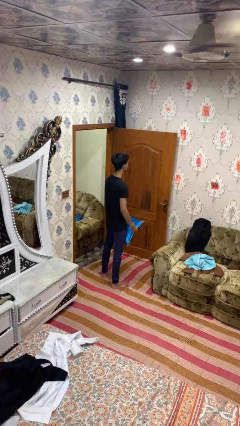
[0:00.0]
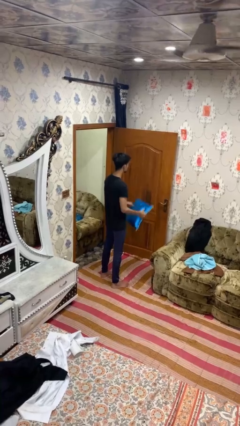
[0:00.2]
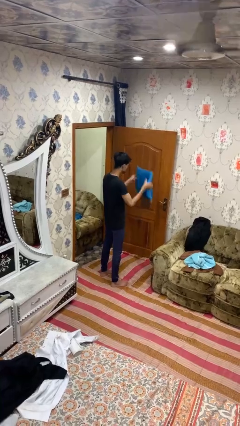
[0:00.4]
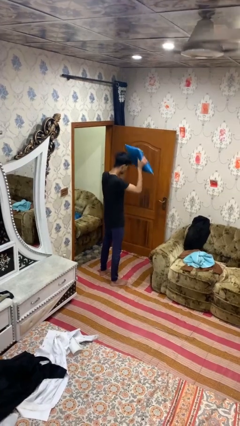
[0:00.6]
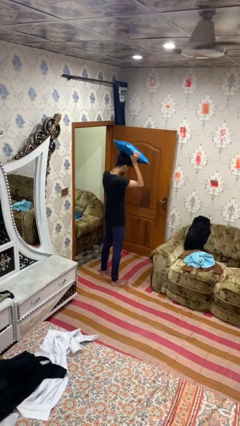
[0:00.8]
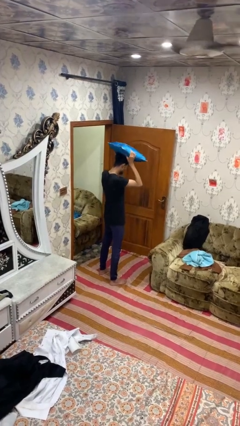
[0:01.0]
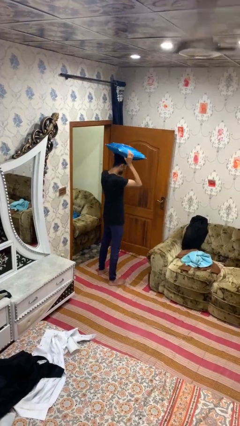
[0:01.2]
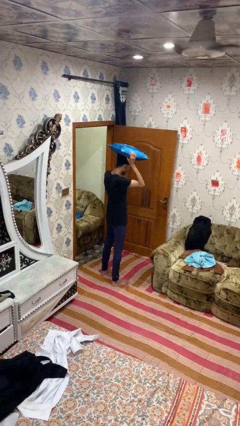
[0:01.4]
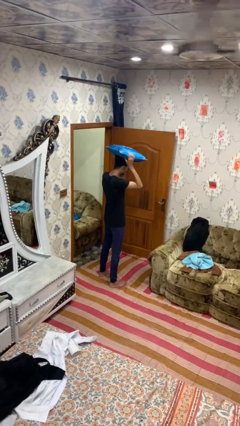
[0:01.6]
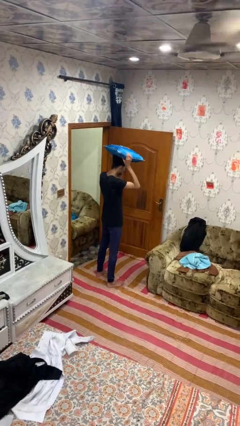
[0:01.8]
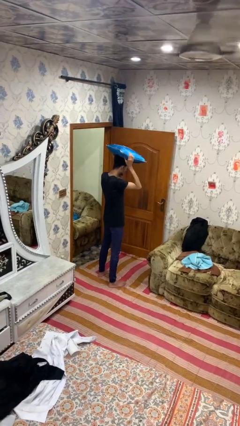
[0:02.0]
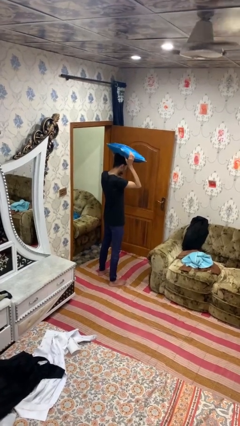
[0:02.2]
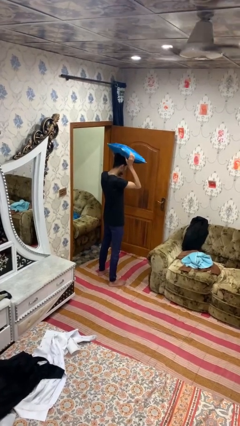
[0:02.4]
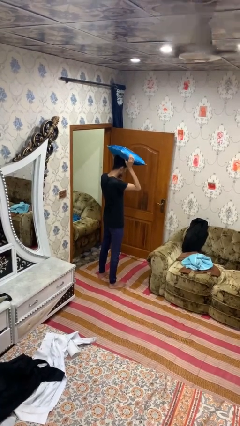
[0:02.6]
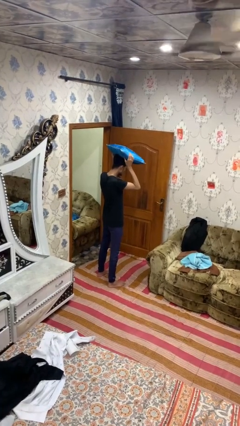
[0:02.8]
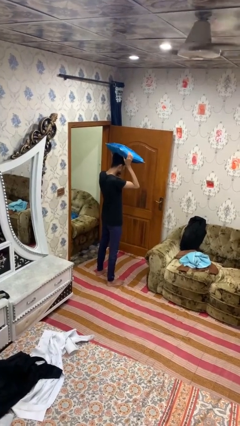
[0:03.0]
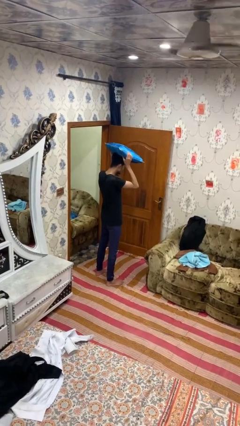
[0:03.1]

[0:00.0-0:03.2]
person holds object above head

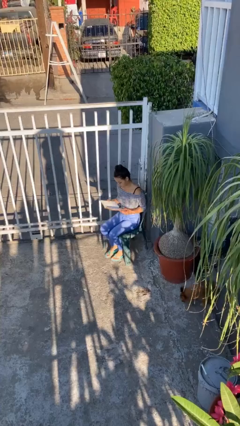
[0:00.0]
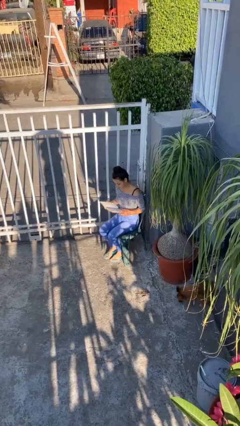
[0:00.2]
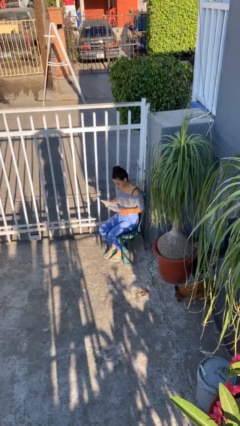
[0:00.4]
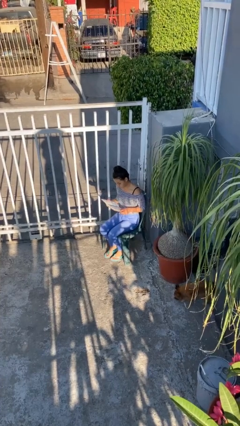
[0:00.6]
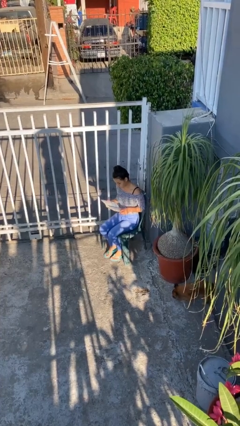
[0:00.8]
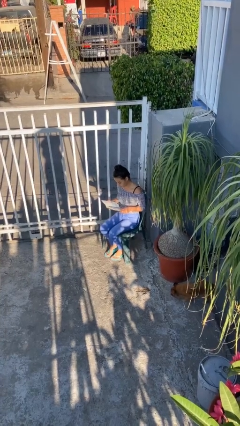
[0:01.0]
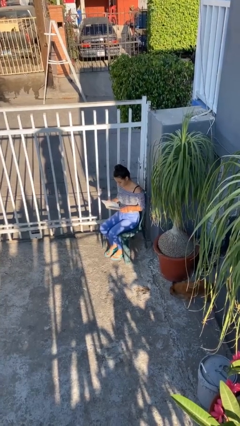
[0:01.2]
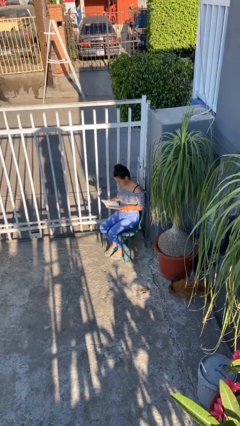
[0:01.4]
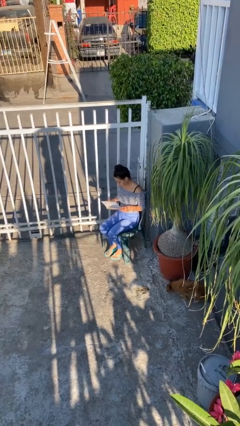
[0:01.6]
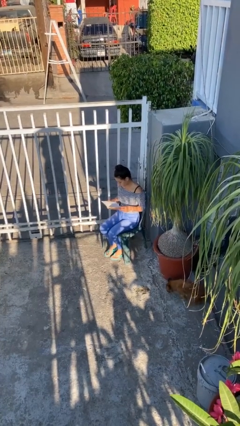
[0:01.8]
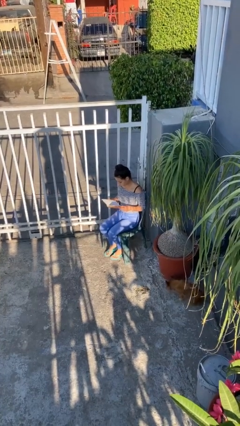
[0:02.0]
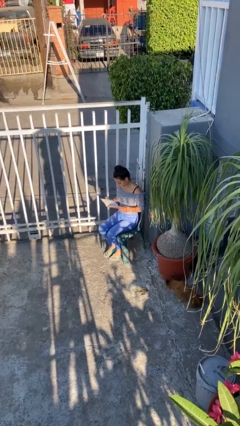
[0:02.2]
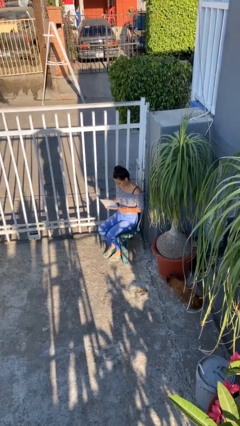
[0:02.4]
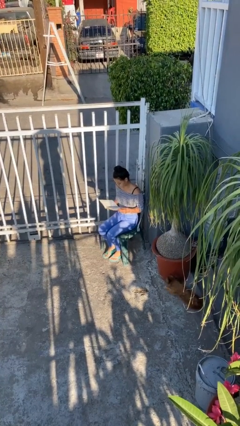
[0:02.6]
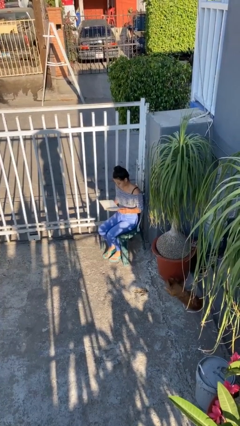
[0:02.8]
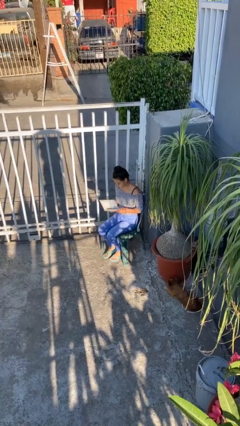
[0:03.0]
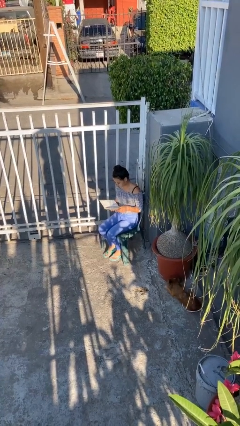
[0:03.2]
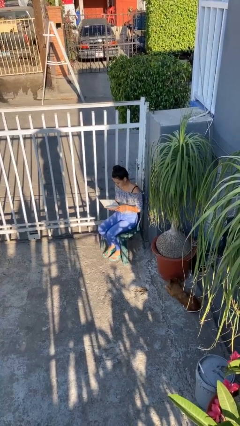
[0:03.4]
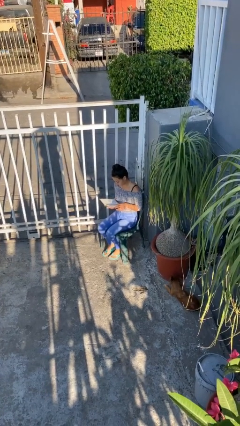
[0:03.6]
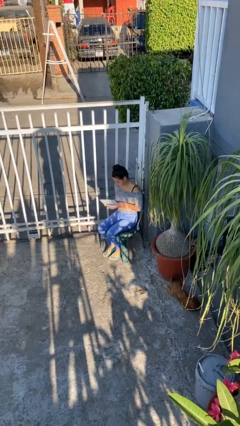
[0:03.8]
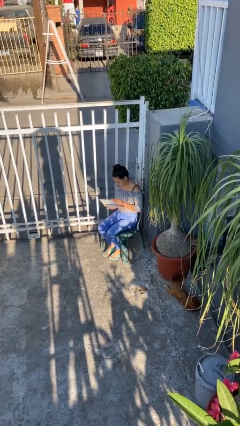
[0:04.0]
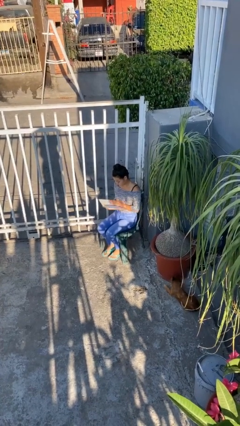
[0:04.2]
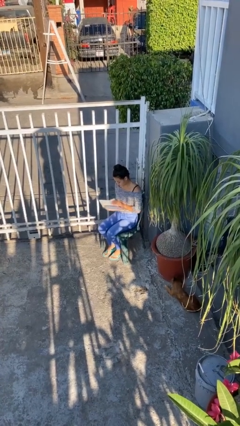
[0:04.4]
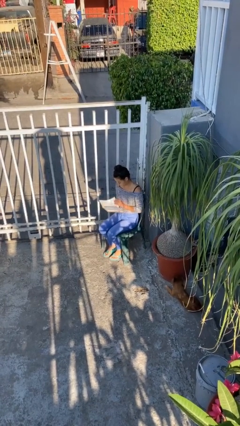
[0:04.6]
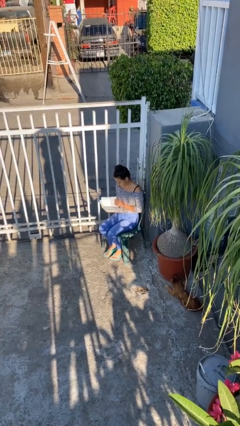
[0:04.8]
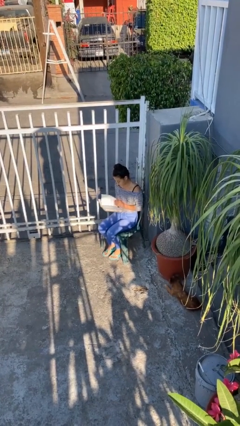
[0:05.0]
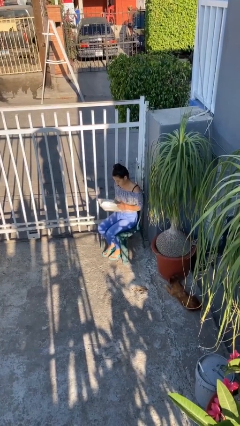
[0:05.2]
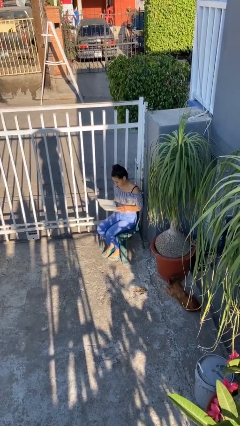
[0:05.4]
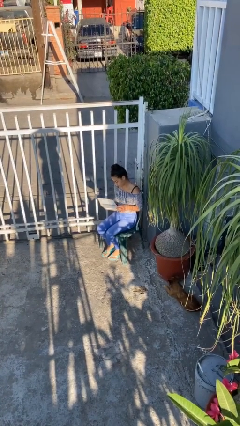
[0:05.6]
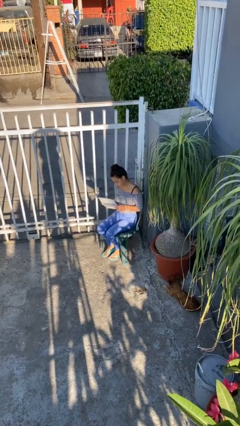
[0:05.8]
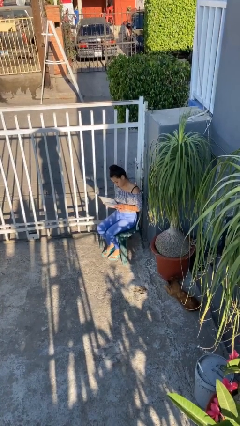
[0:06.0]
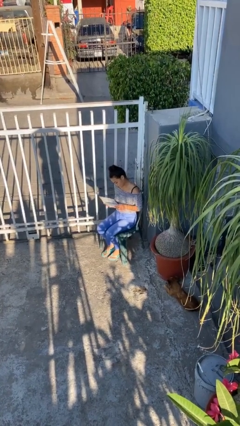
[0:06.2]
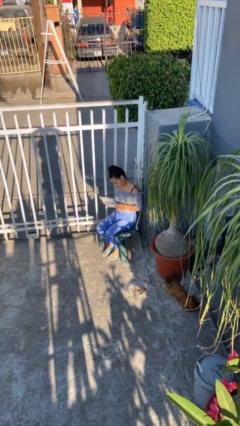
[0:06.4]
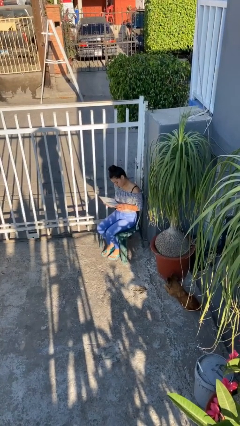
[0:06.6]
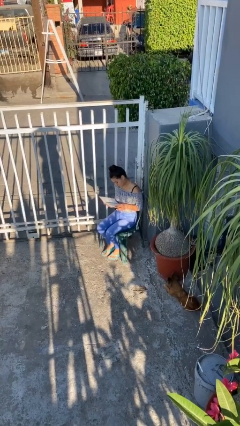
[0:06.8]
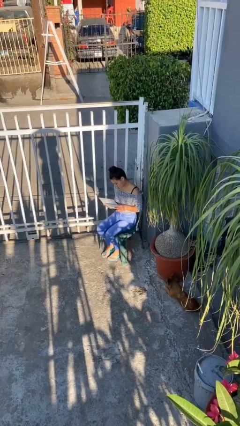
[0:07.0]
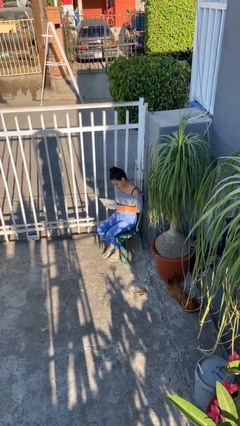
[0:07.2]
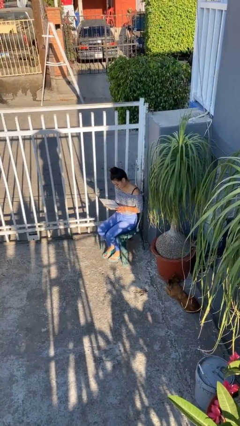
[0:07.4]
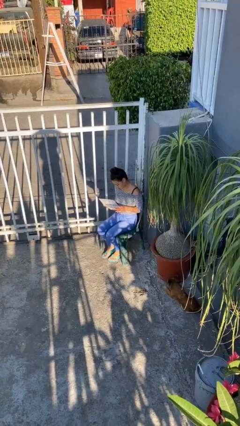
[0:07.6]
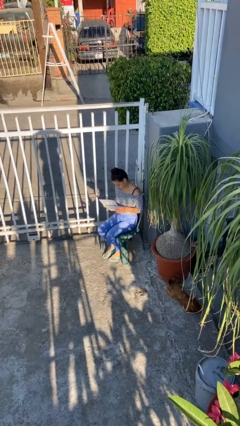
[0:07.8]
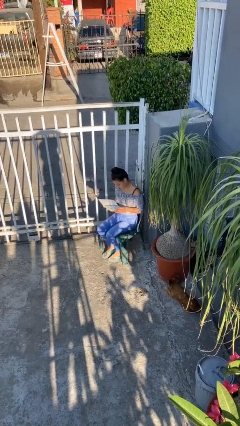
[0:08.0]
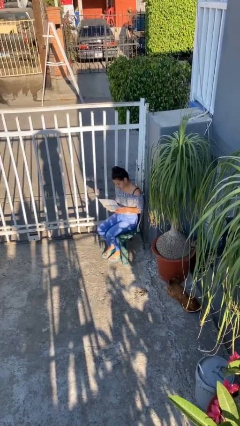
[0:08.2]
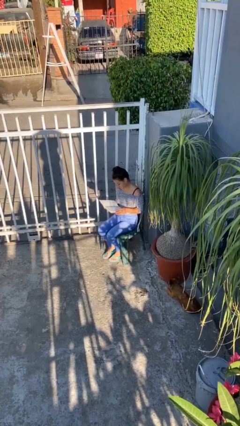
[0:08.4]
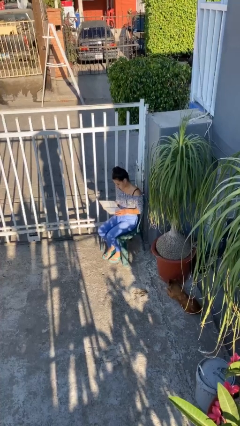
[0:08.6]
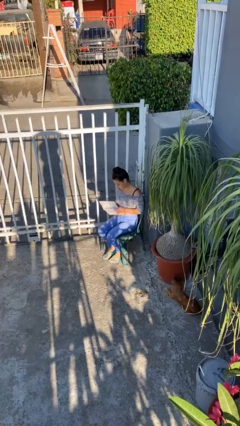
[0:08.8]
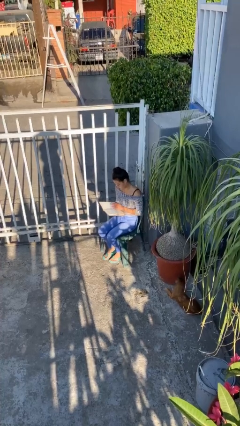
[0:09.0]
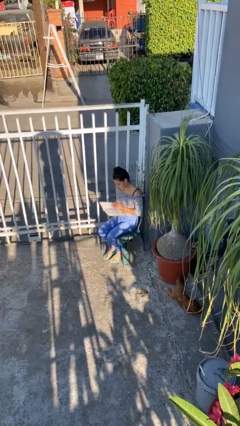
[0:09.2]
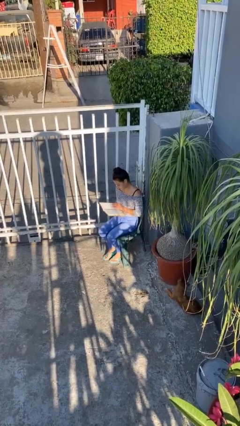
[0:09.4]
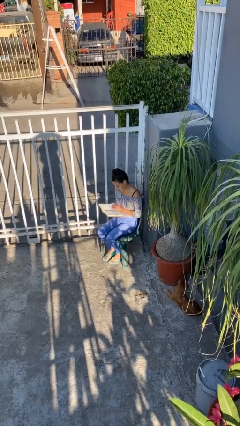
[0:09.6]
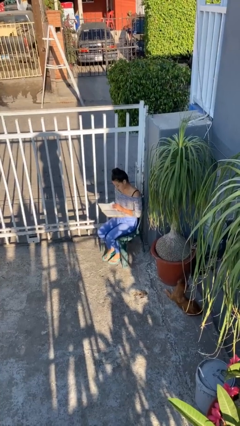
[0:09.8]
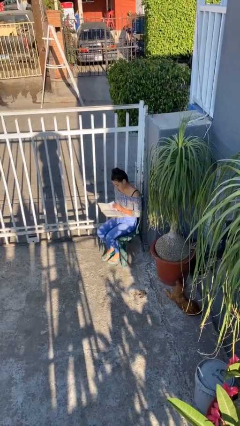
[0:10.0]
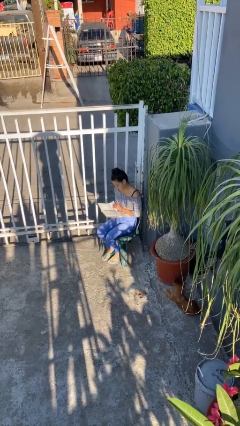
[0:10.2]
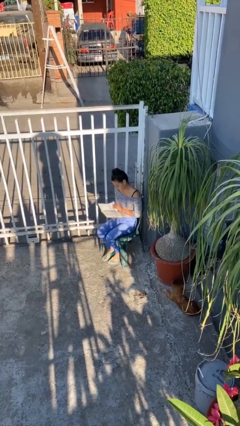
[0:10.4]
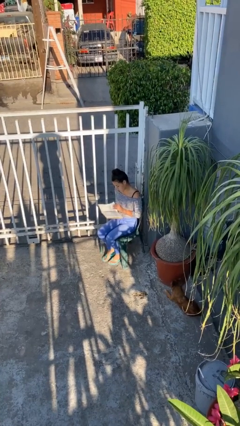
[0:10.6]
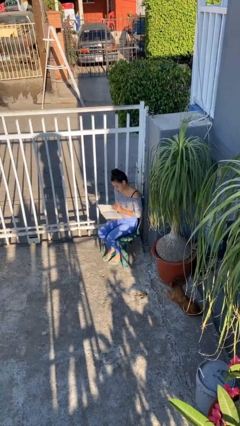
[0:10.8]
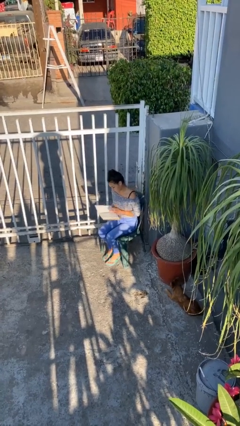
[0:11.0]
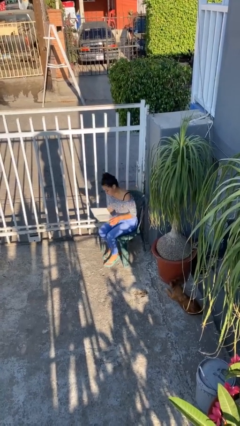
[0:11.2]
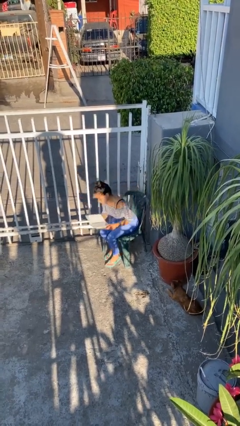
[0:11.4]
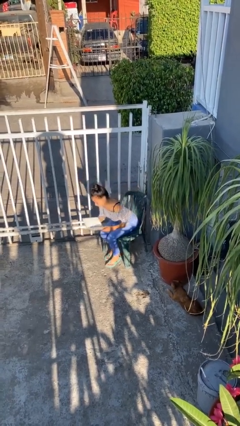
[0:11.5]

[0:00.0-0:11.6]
person reads document

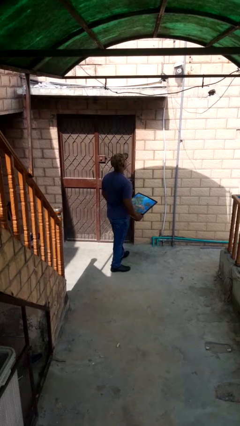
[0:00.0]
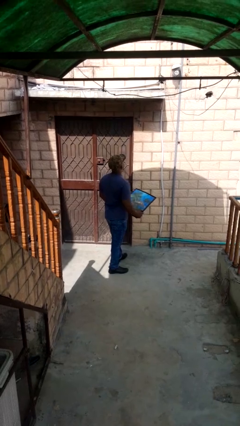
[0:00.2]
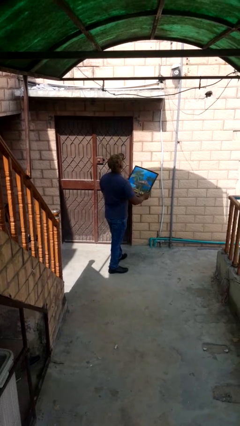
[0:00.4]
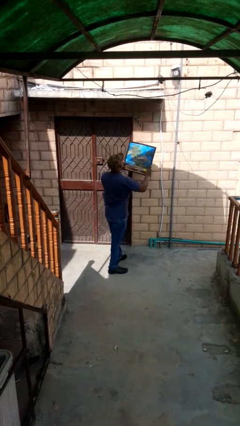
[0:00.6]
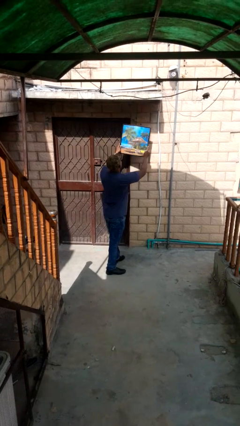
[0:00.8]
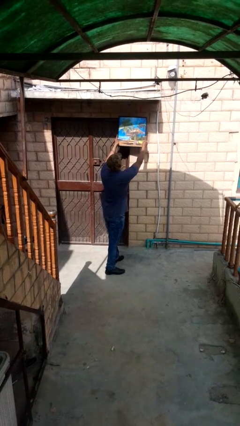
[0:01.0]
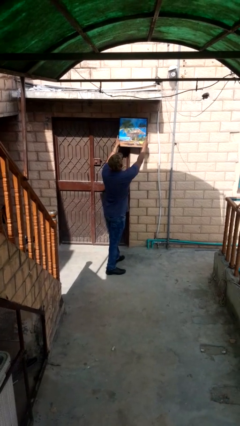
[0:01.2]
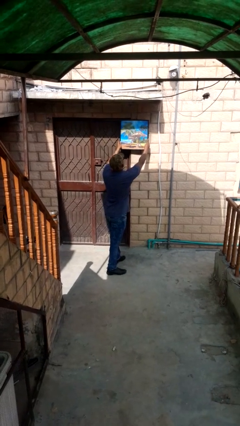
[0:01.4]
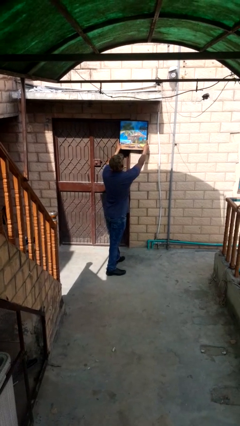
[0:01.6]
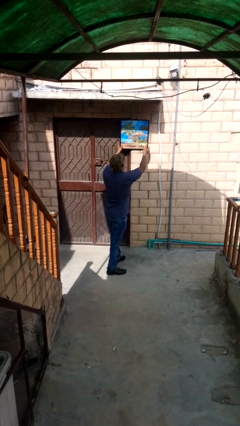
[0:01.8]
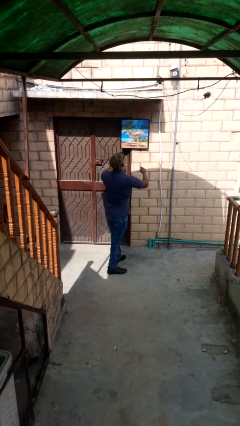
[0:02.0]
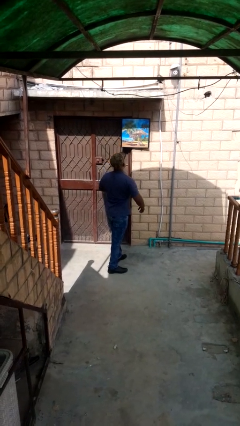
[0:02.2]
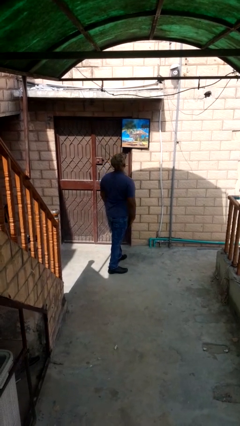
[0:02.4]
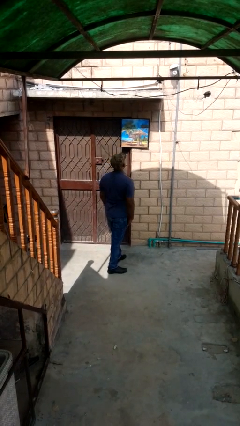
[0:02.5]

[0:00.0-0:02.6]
person puts up picture frame

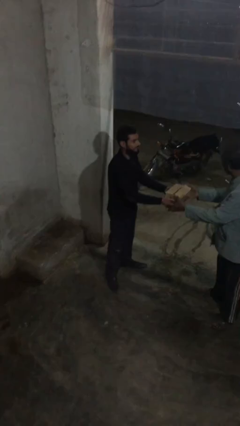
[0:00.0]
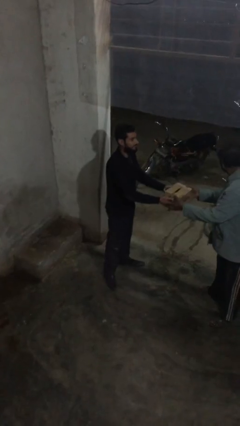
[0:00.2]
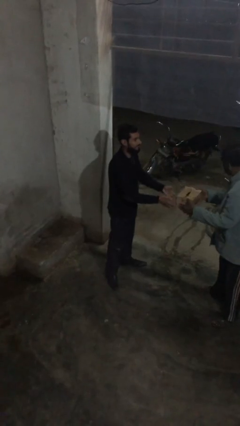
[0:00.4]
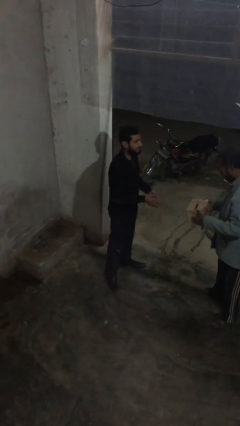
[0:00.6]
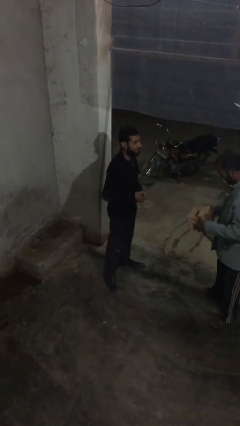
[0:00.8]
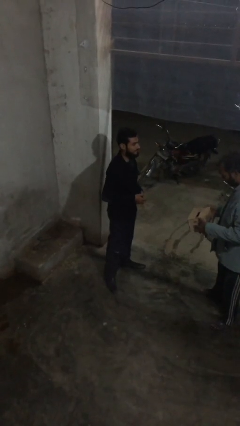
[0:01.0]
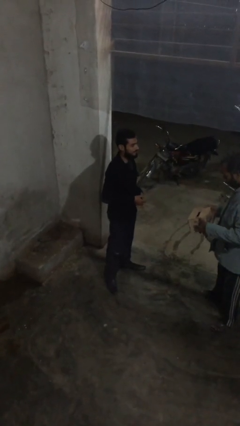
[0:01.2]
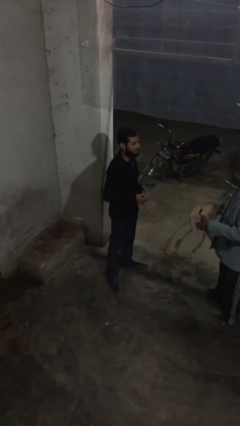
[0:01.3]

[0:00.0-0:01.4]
person transfers object to person
